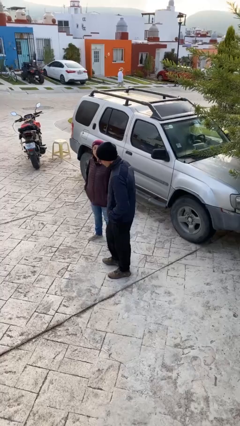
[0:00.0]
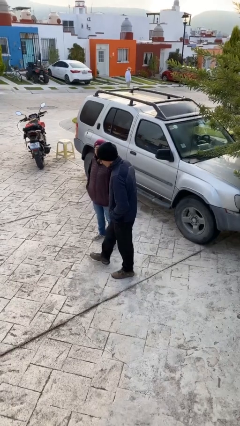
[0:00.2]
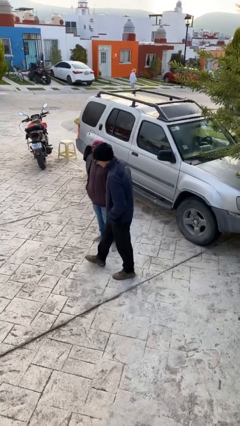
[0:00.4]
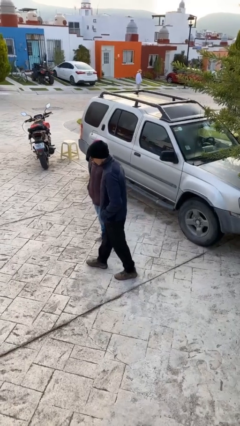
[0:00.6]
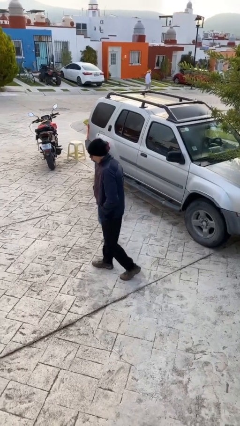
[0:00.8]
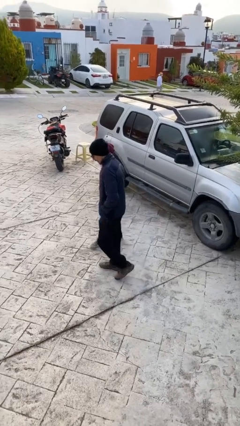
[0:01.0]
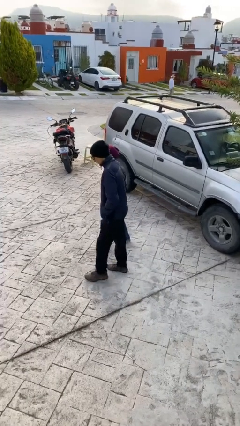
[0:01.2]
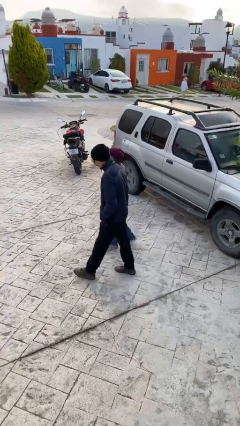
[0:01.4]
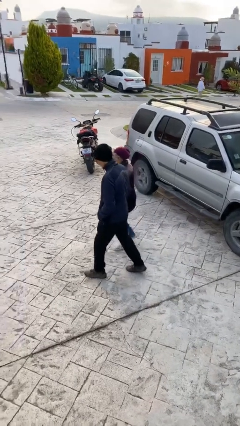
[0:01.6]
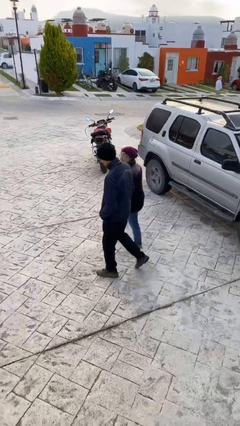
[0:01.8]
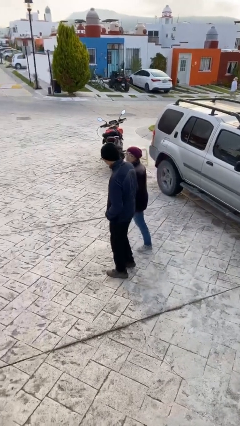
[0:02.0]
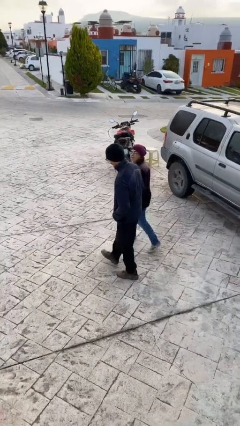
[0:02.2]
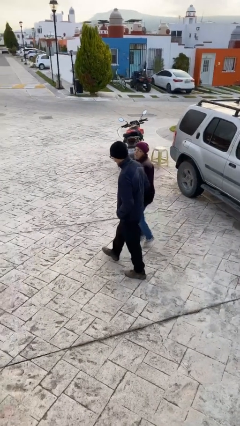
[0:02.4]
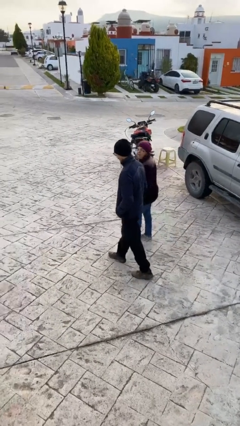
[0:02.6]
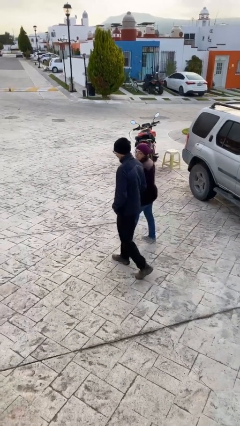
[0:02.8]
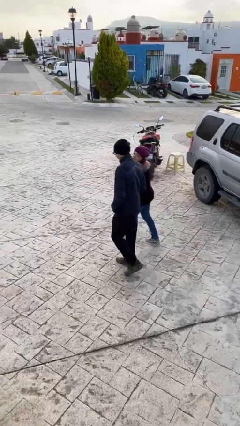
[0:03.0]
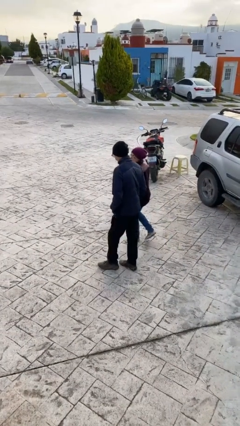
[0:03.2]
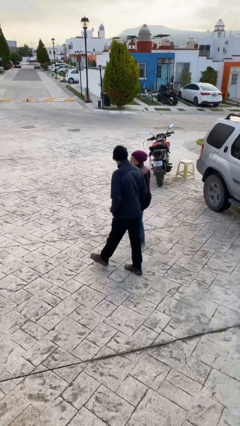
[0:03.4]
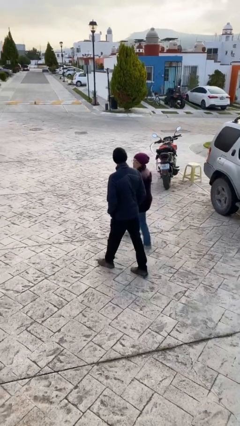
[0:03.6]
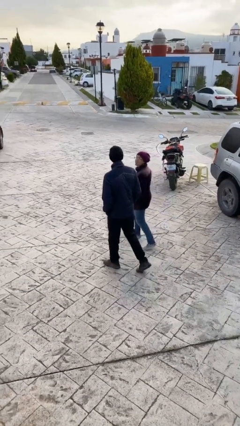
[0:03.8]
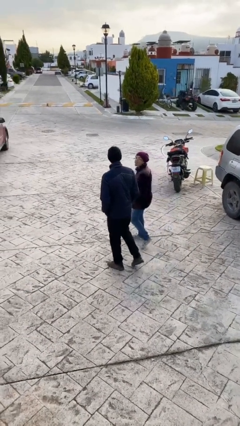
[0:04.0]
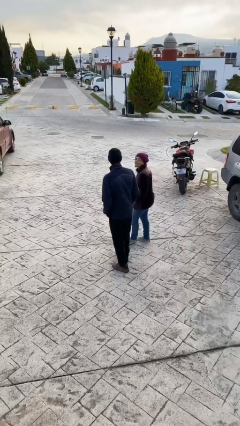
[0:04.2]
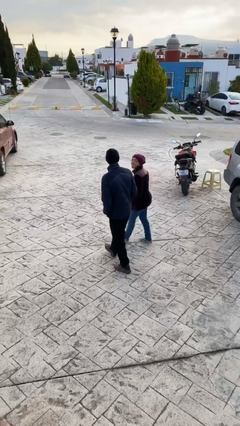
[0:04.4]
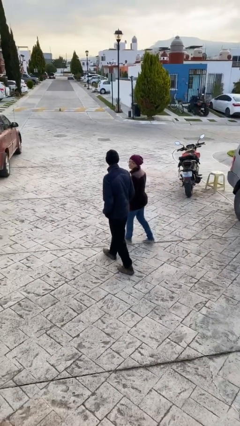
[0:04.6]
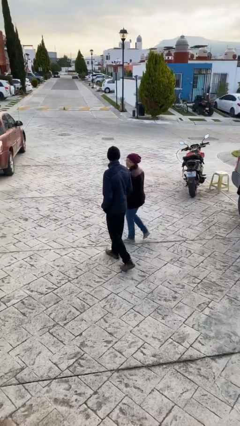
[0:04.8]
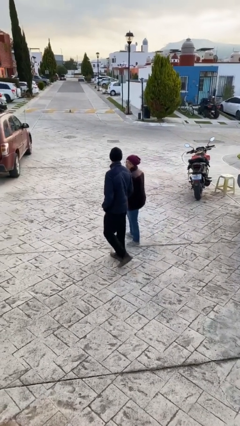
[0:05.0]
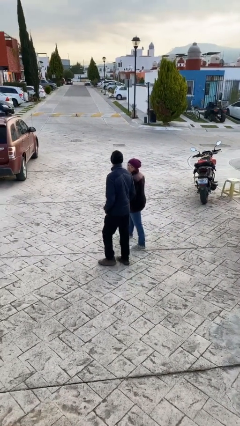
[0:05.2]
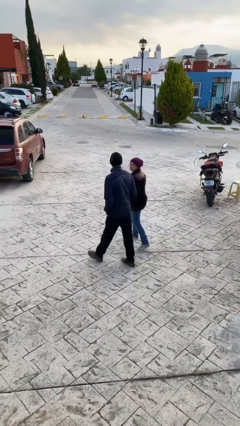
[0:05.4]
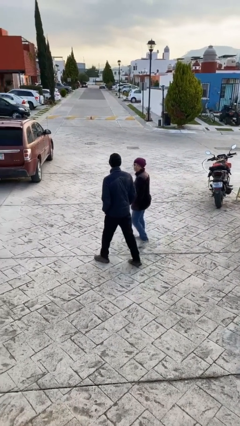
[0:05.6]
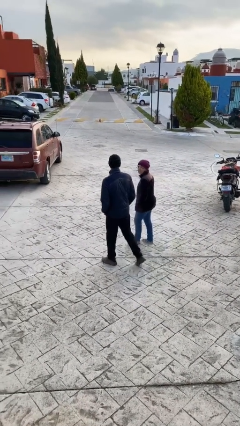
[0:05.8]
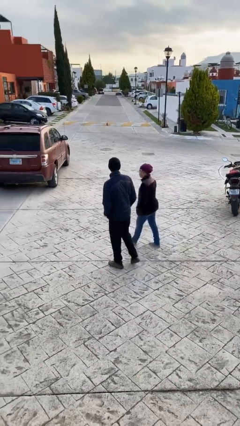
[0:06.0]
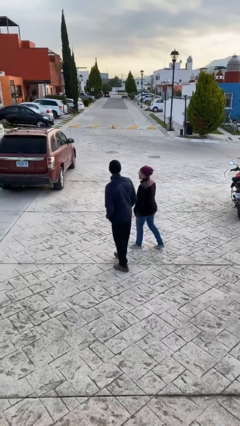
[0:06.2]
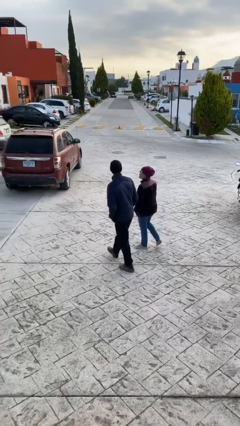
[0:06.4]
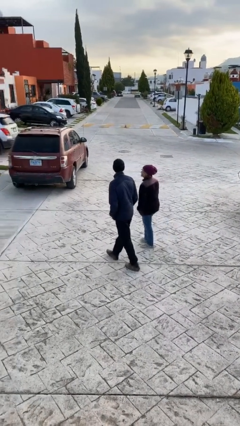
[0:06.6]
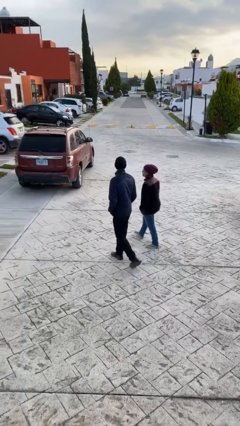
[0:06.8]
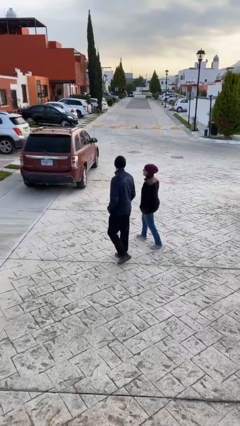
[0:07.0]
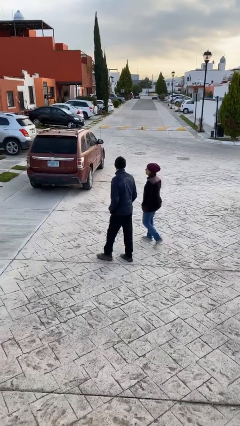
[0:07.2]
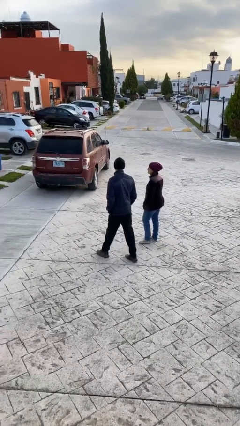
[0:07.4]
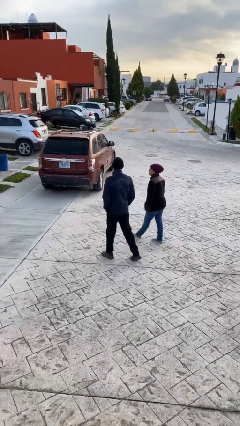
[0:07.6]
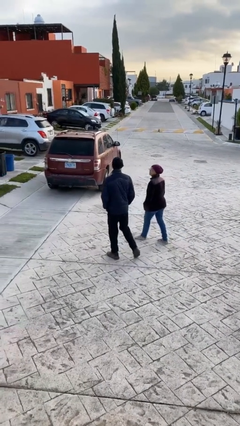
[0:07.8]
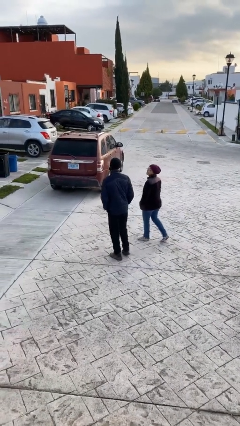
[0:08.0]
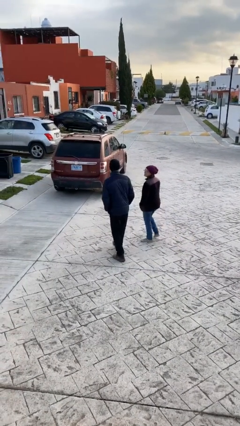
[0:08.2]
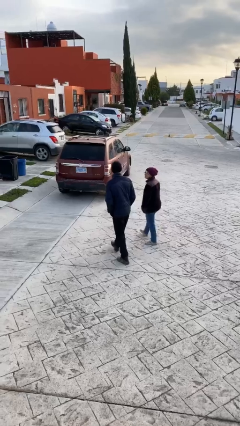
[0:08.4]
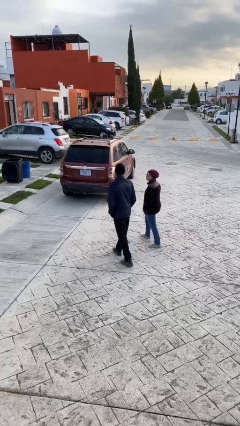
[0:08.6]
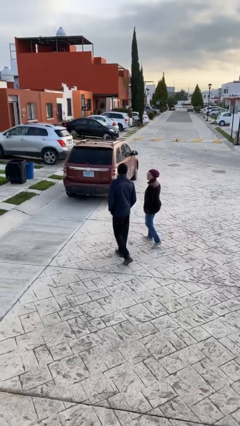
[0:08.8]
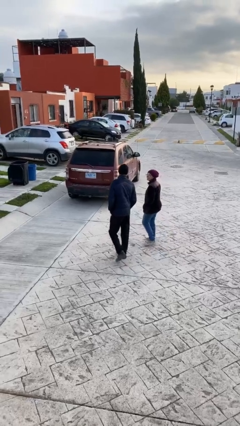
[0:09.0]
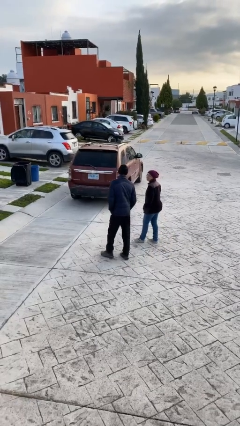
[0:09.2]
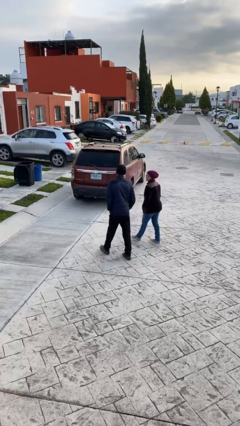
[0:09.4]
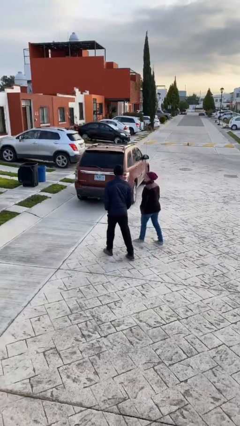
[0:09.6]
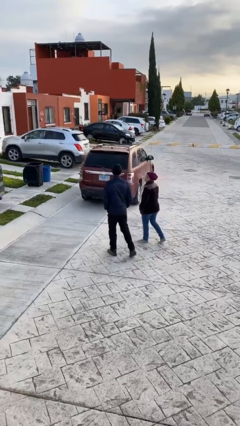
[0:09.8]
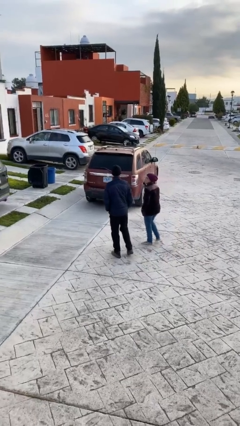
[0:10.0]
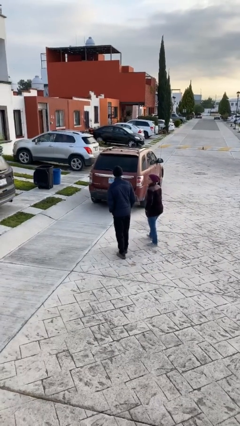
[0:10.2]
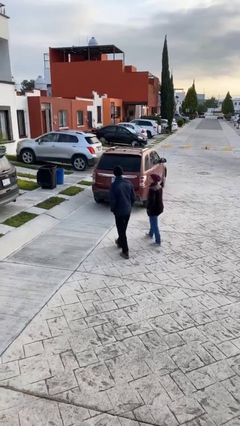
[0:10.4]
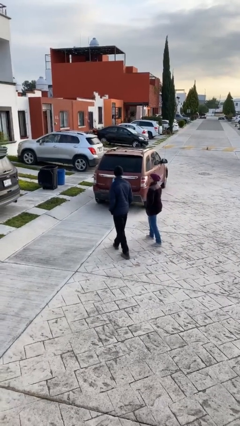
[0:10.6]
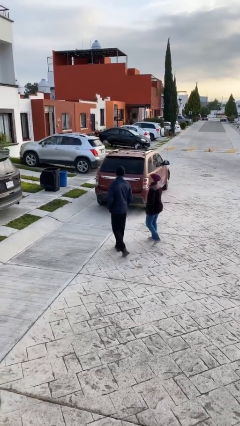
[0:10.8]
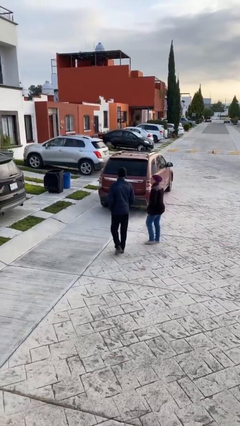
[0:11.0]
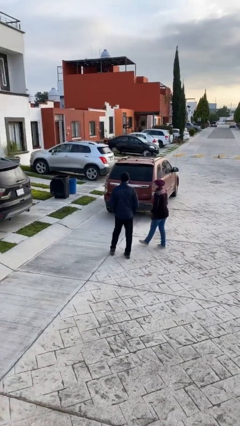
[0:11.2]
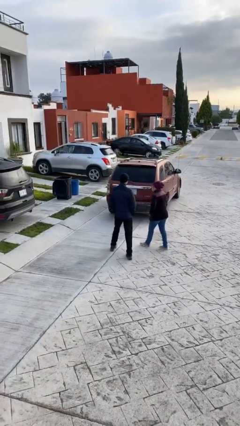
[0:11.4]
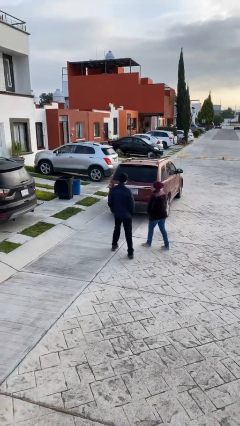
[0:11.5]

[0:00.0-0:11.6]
person talks to person

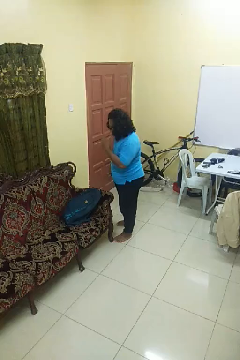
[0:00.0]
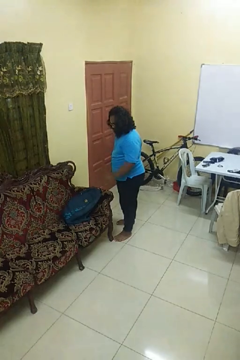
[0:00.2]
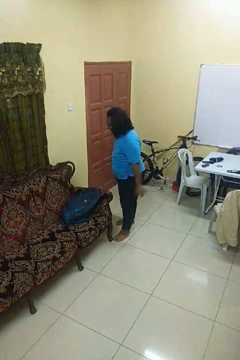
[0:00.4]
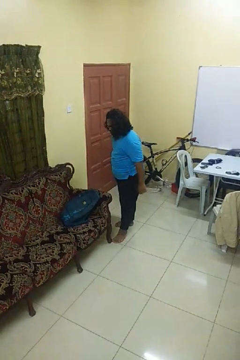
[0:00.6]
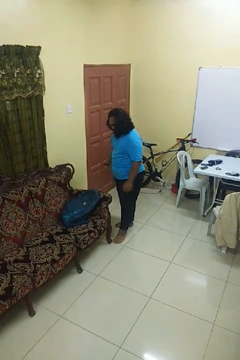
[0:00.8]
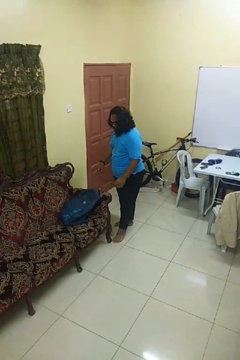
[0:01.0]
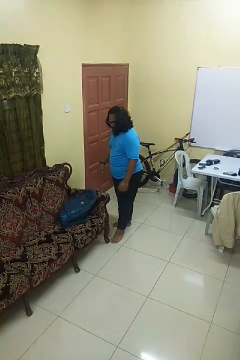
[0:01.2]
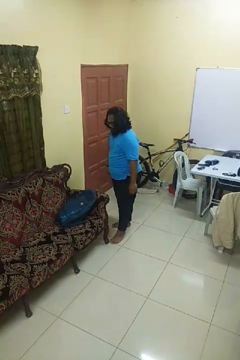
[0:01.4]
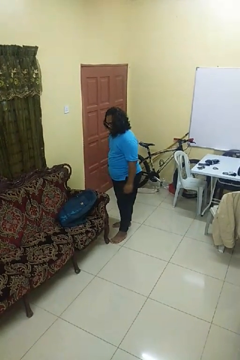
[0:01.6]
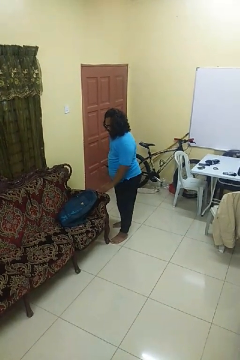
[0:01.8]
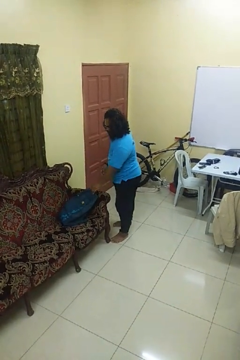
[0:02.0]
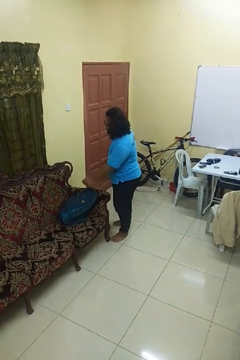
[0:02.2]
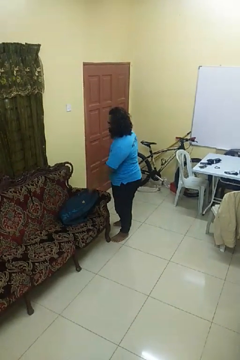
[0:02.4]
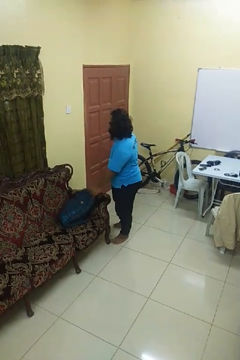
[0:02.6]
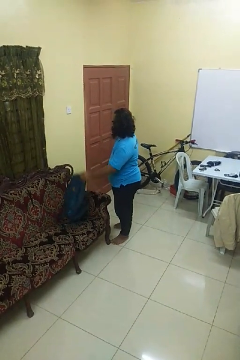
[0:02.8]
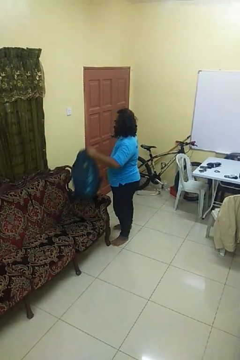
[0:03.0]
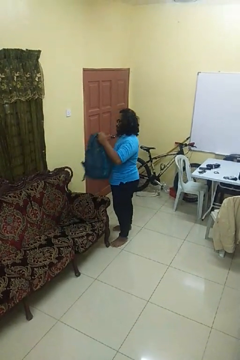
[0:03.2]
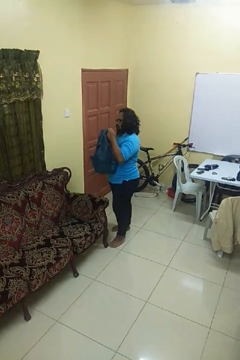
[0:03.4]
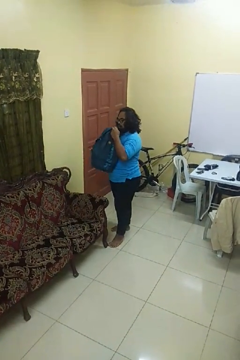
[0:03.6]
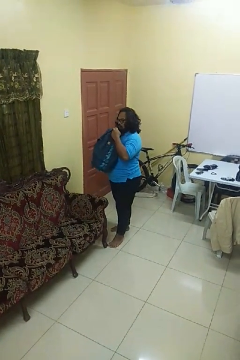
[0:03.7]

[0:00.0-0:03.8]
person picks up object from couch

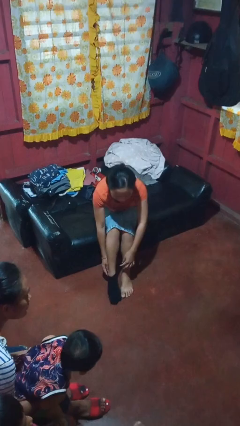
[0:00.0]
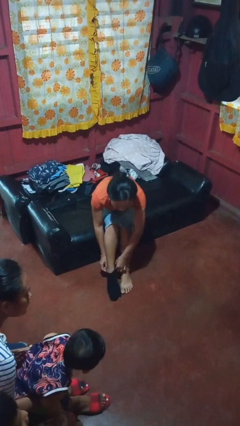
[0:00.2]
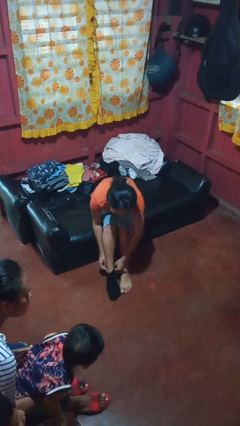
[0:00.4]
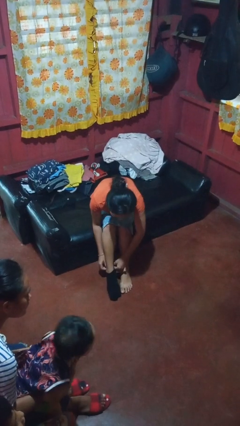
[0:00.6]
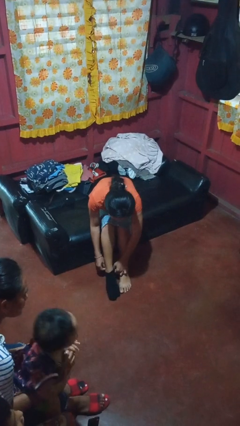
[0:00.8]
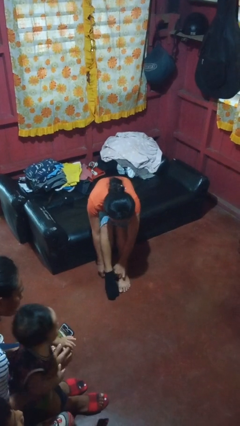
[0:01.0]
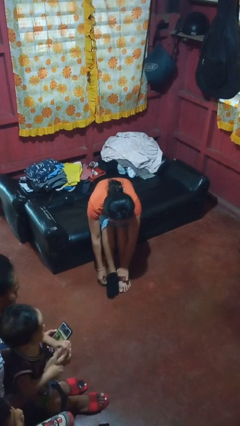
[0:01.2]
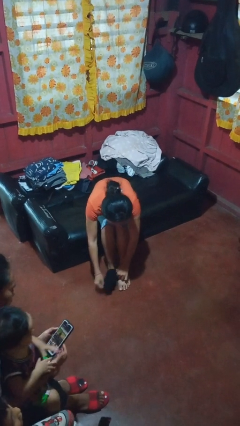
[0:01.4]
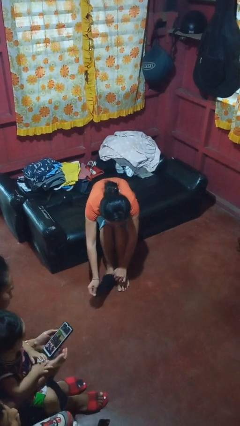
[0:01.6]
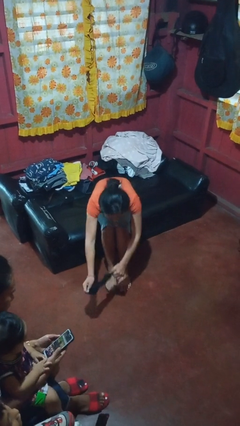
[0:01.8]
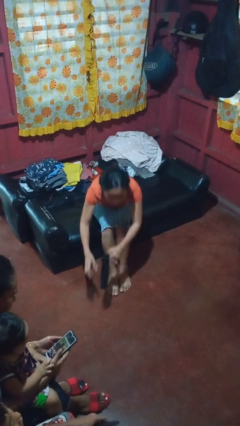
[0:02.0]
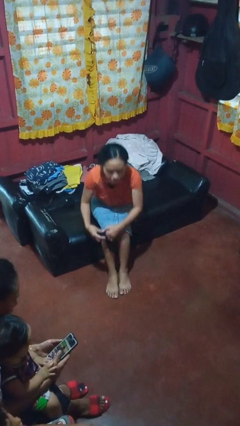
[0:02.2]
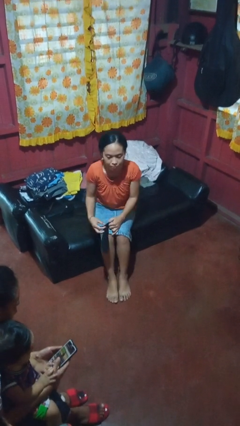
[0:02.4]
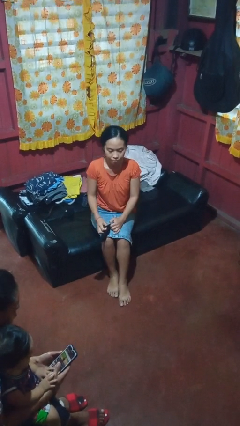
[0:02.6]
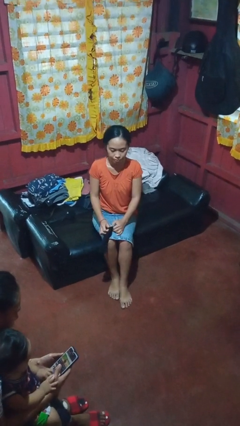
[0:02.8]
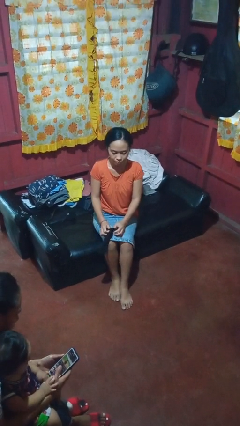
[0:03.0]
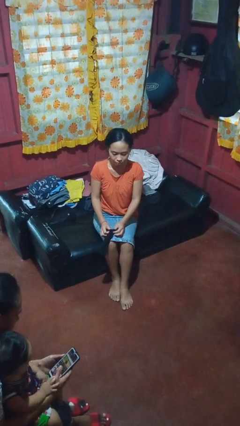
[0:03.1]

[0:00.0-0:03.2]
person takes off socks
